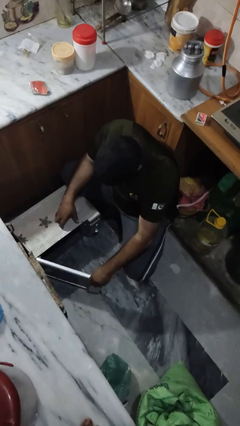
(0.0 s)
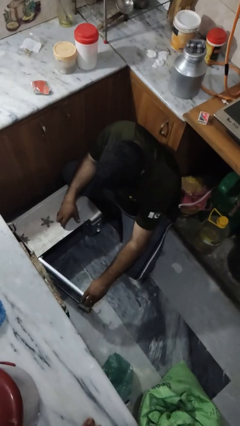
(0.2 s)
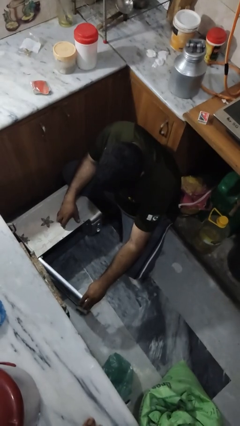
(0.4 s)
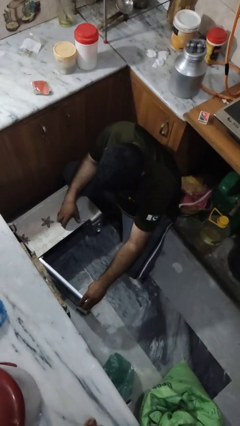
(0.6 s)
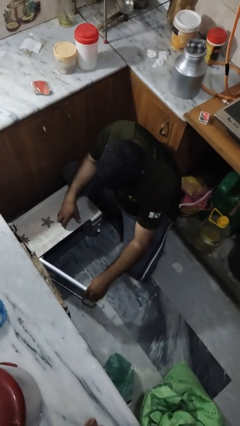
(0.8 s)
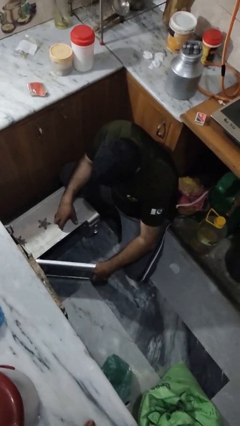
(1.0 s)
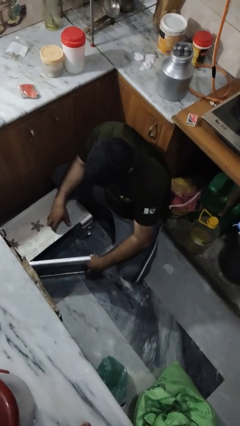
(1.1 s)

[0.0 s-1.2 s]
person opens oven door

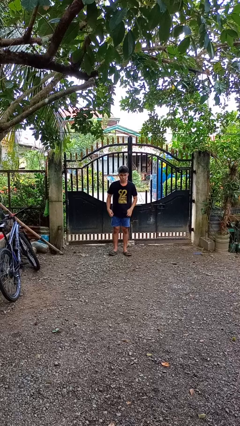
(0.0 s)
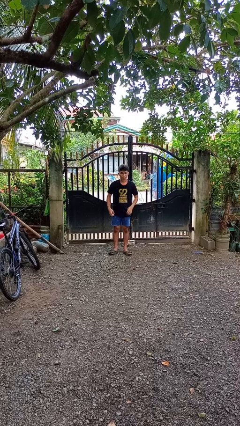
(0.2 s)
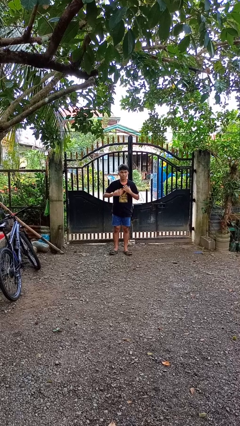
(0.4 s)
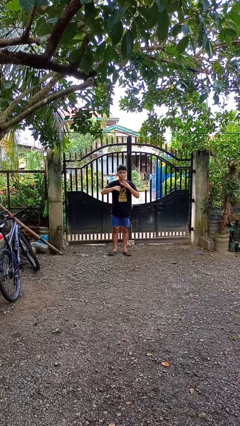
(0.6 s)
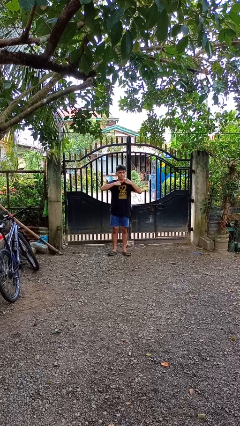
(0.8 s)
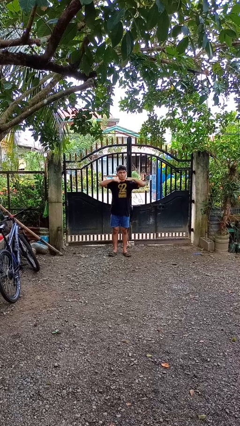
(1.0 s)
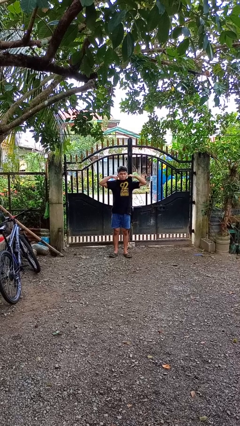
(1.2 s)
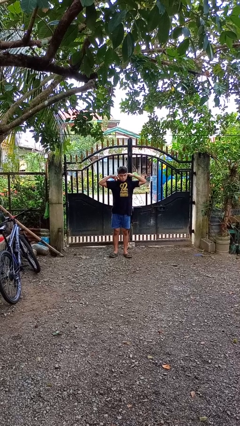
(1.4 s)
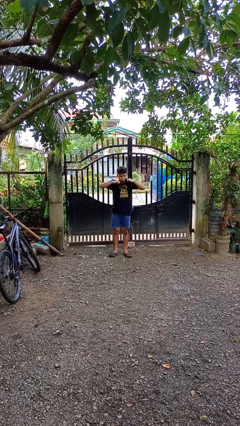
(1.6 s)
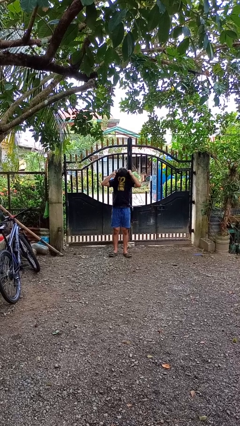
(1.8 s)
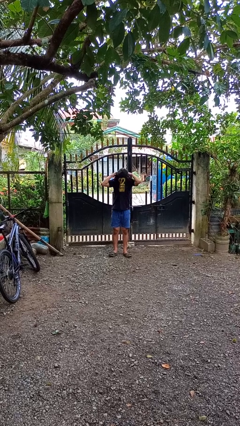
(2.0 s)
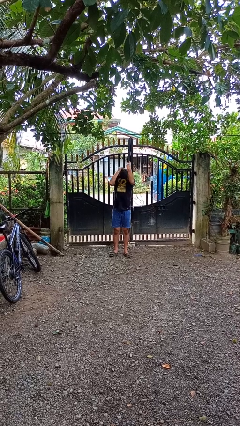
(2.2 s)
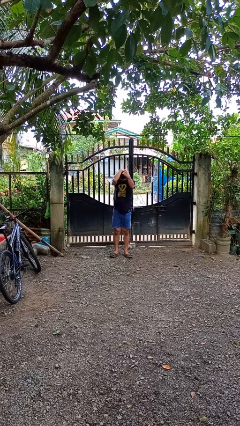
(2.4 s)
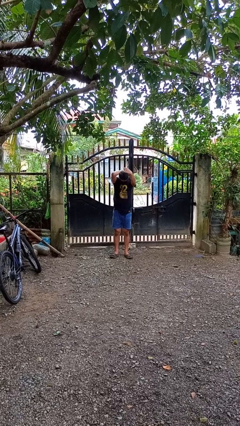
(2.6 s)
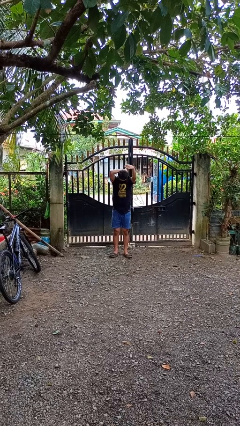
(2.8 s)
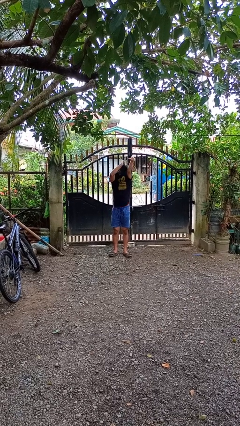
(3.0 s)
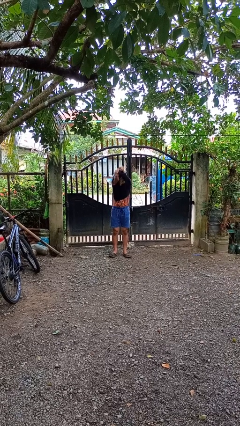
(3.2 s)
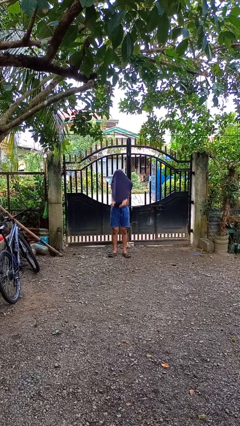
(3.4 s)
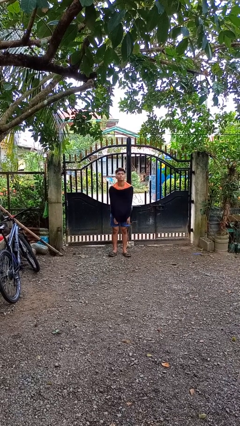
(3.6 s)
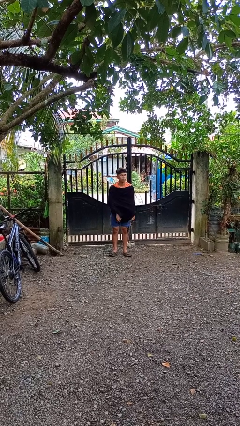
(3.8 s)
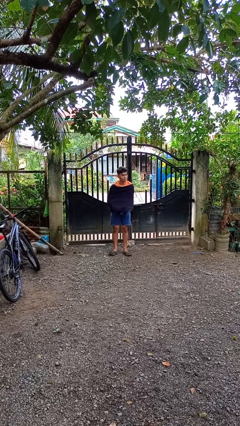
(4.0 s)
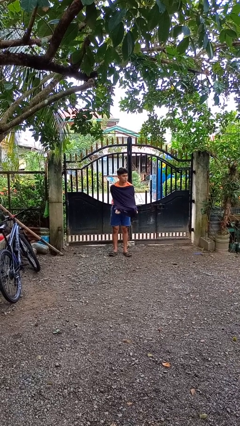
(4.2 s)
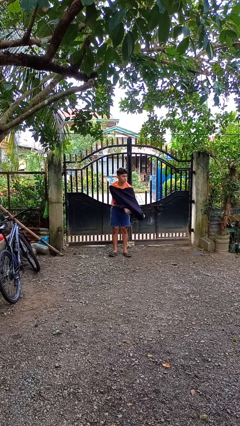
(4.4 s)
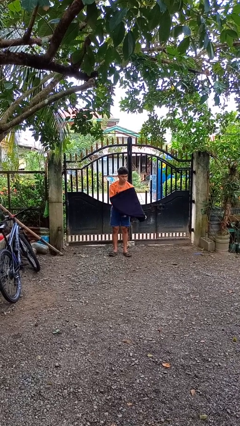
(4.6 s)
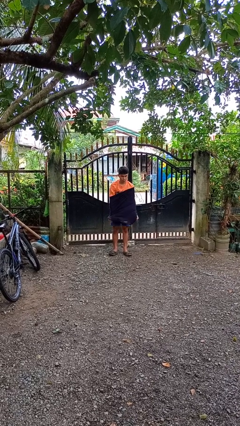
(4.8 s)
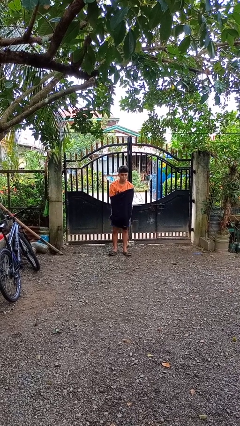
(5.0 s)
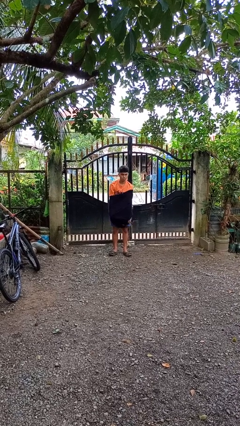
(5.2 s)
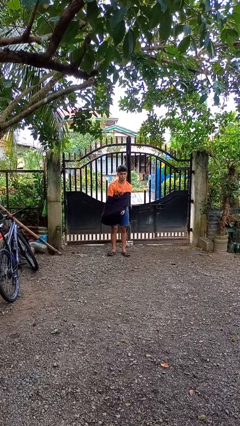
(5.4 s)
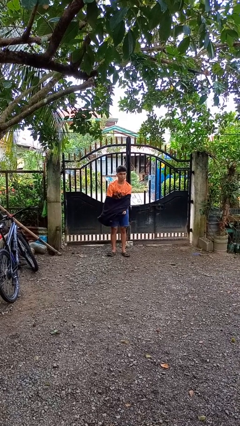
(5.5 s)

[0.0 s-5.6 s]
person takes off shirt

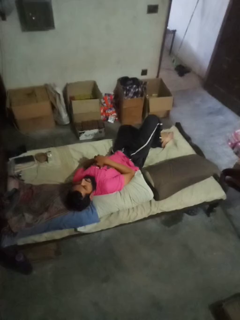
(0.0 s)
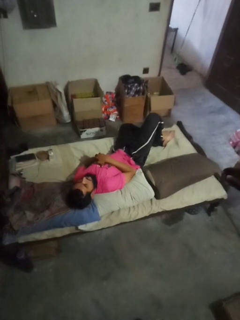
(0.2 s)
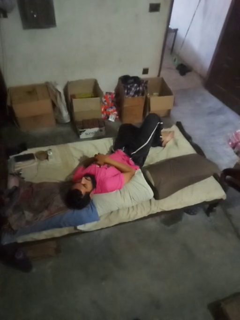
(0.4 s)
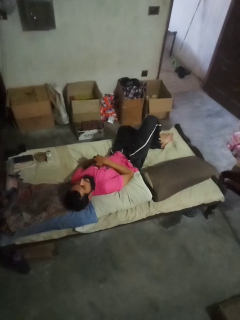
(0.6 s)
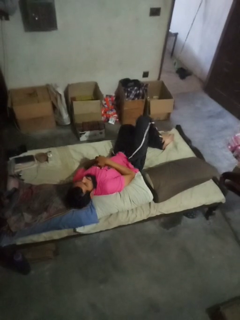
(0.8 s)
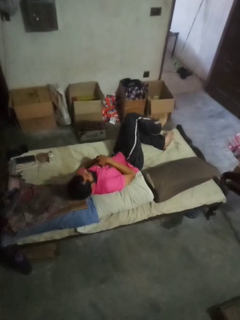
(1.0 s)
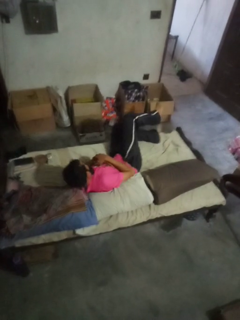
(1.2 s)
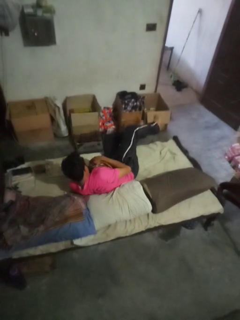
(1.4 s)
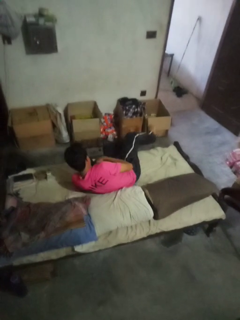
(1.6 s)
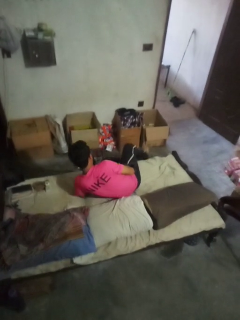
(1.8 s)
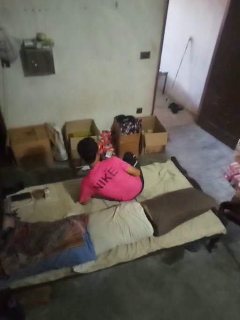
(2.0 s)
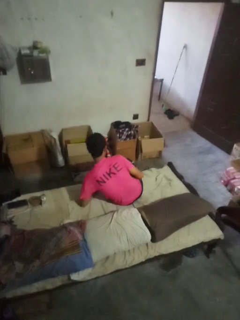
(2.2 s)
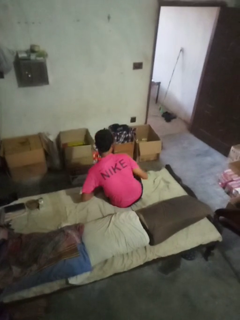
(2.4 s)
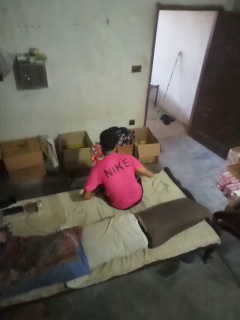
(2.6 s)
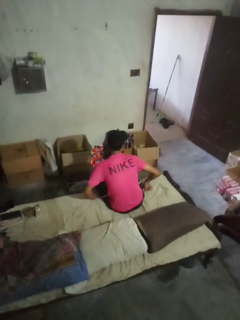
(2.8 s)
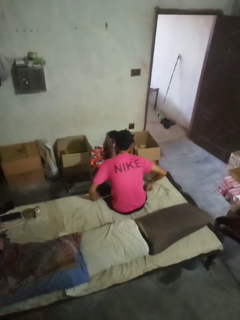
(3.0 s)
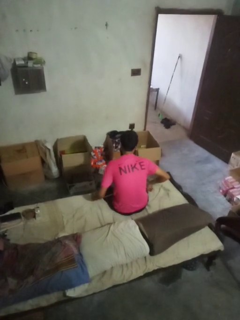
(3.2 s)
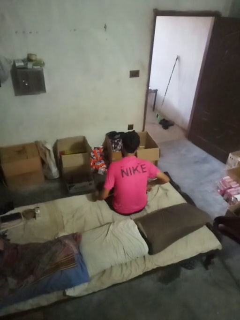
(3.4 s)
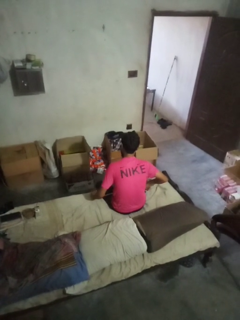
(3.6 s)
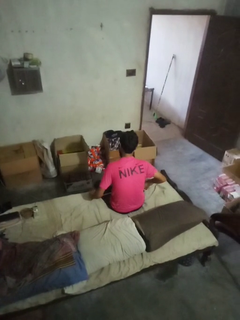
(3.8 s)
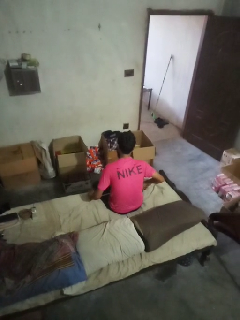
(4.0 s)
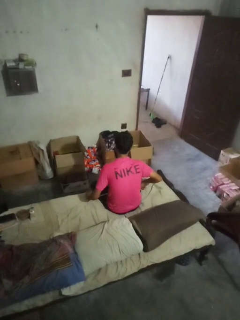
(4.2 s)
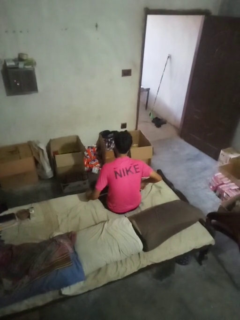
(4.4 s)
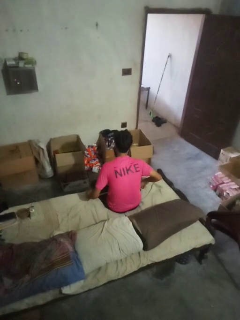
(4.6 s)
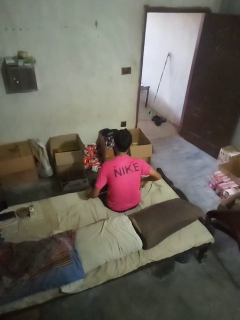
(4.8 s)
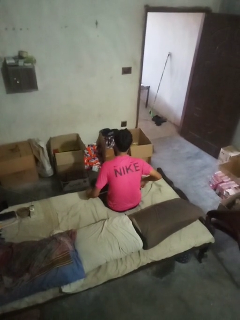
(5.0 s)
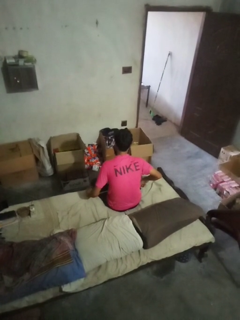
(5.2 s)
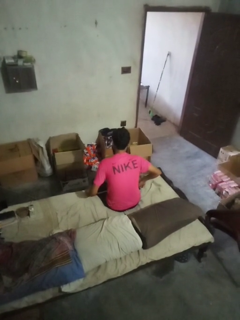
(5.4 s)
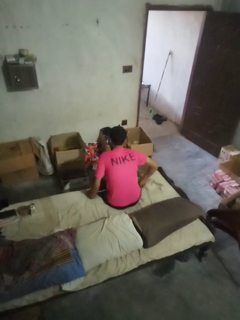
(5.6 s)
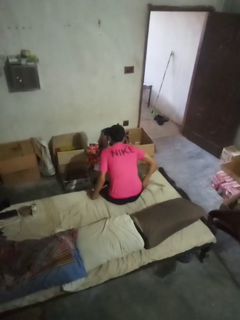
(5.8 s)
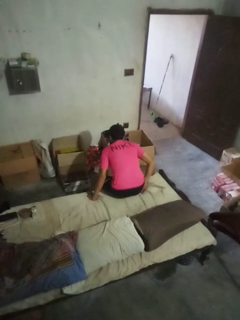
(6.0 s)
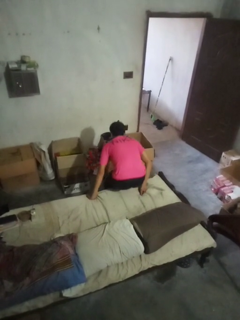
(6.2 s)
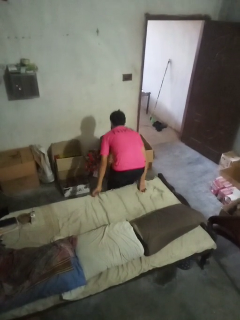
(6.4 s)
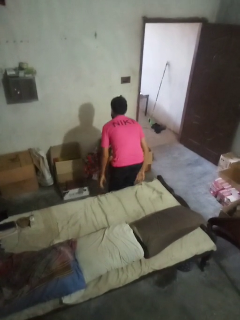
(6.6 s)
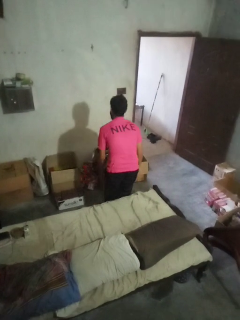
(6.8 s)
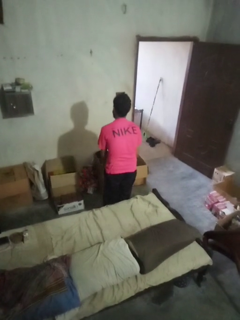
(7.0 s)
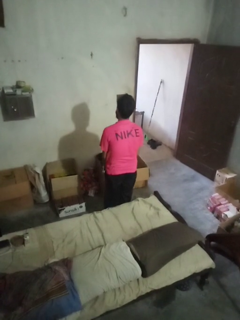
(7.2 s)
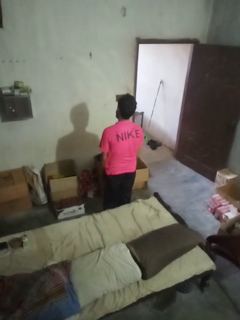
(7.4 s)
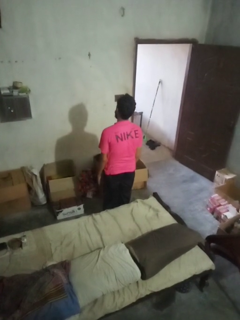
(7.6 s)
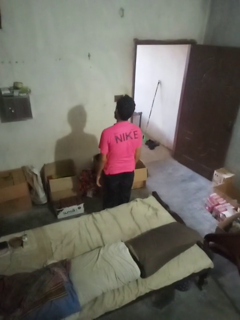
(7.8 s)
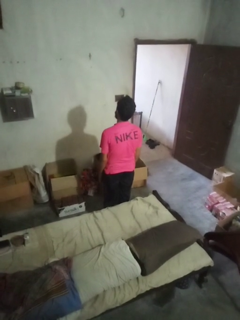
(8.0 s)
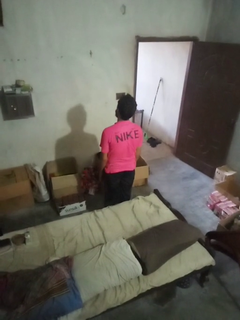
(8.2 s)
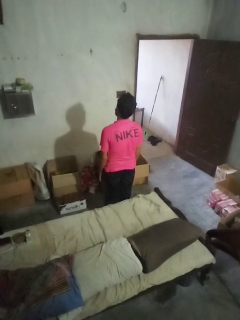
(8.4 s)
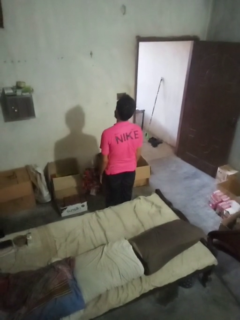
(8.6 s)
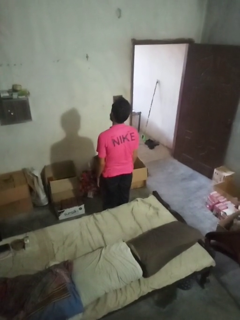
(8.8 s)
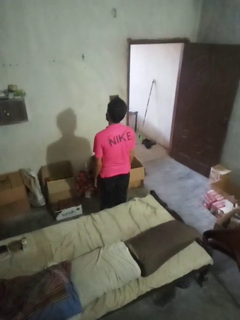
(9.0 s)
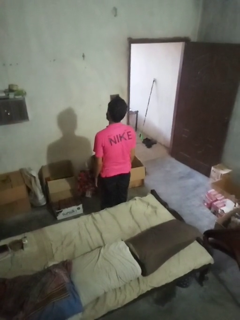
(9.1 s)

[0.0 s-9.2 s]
person stands up

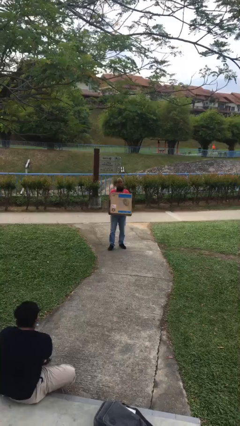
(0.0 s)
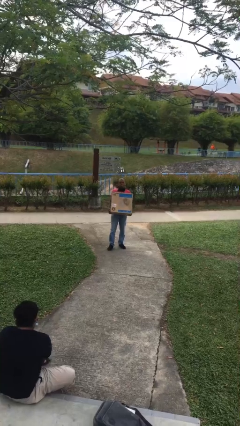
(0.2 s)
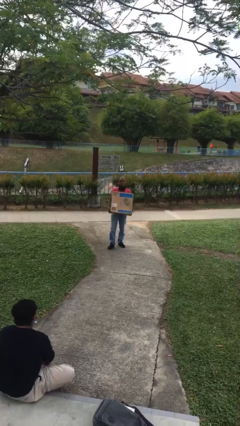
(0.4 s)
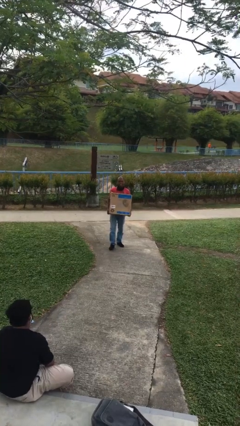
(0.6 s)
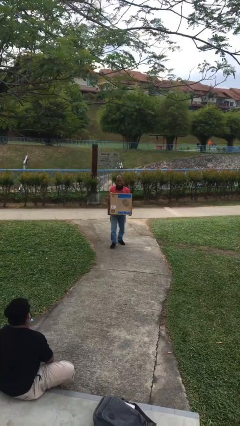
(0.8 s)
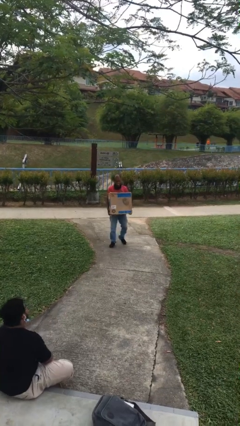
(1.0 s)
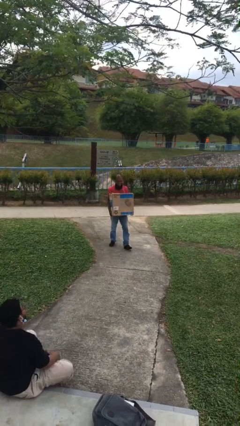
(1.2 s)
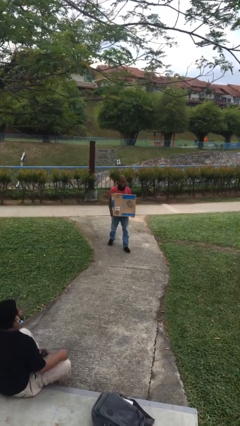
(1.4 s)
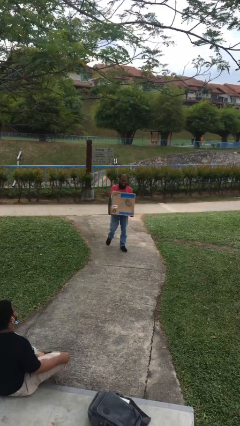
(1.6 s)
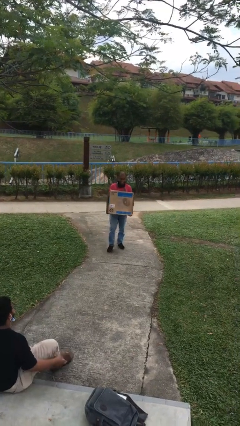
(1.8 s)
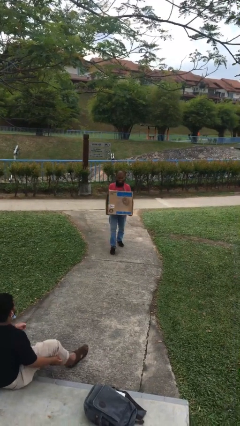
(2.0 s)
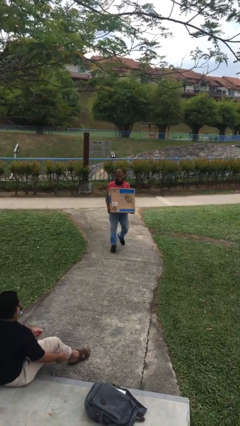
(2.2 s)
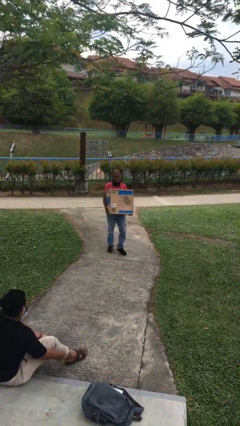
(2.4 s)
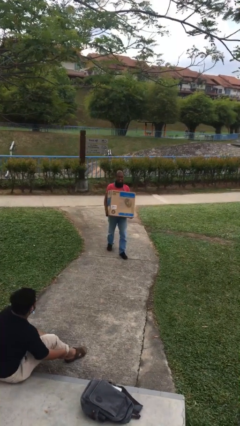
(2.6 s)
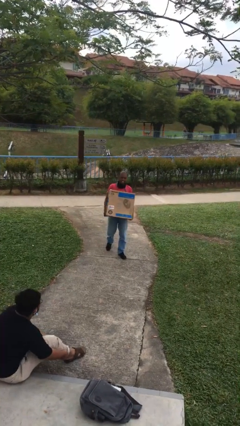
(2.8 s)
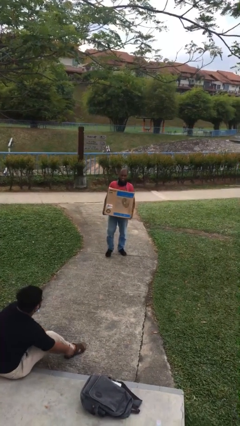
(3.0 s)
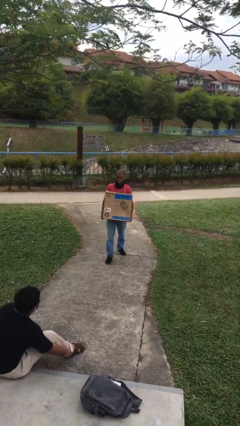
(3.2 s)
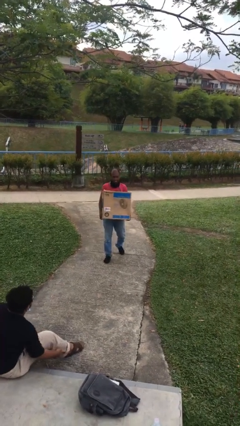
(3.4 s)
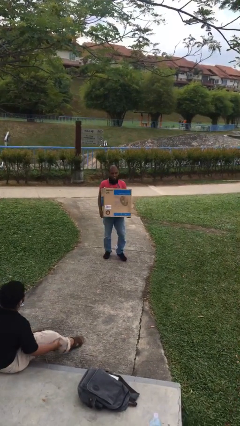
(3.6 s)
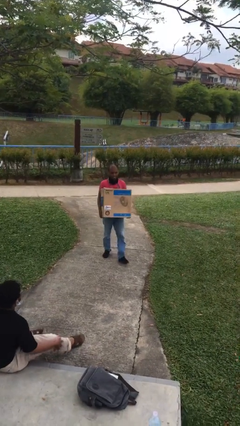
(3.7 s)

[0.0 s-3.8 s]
person carries heavy object

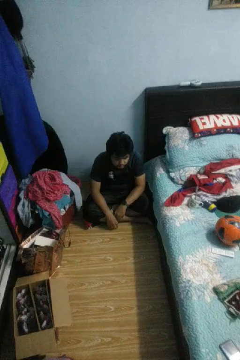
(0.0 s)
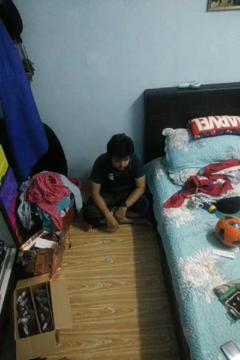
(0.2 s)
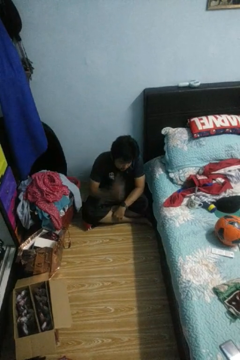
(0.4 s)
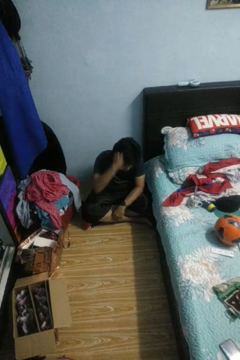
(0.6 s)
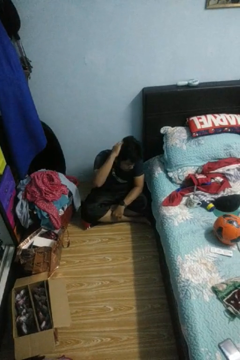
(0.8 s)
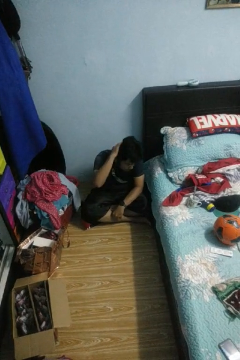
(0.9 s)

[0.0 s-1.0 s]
person strokes hair
